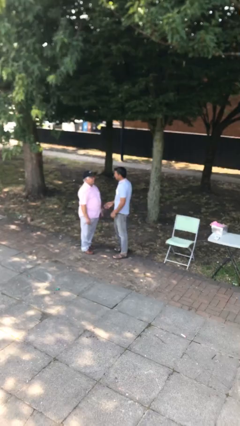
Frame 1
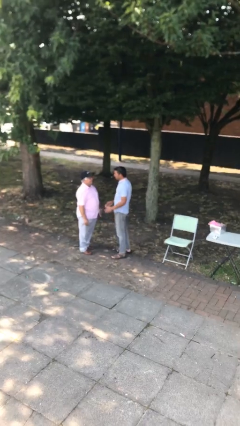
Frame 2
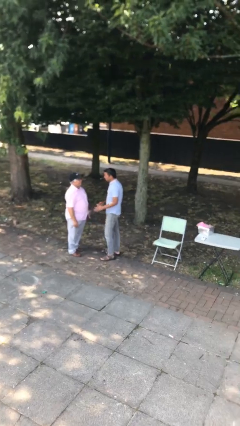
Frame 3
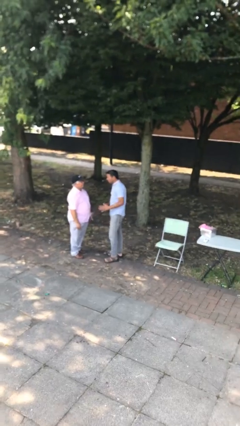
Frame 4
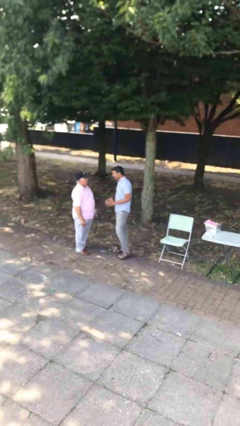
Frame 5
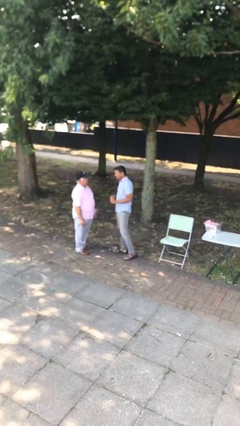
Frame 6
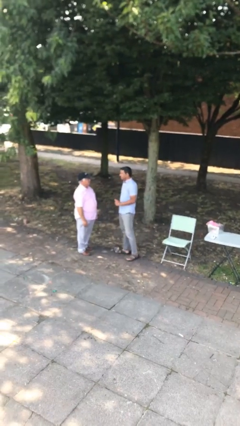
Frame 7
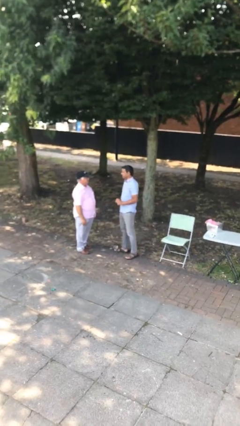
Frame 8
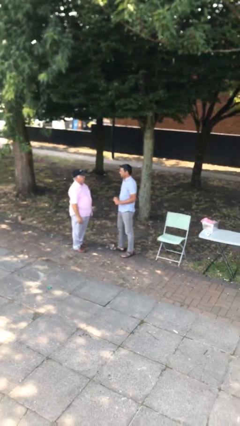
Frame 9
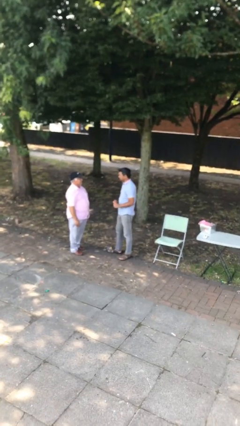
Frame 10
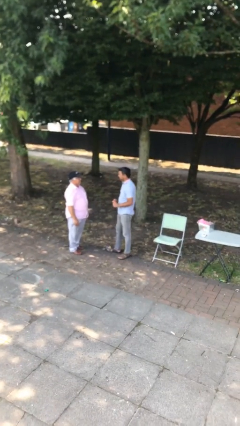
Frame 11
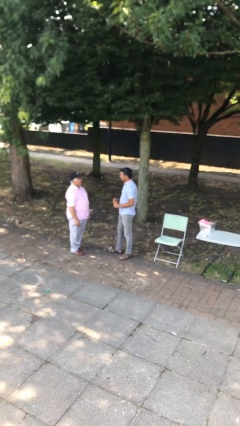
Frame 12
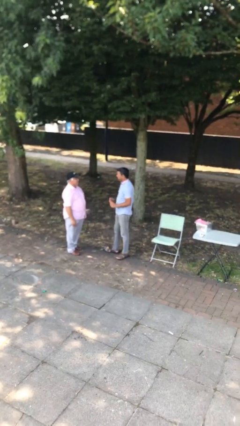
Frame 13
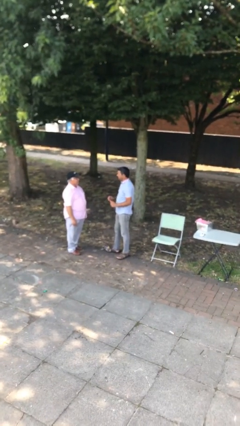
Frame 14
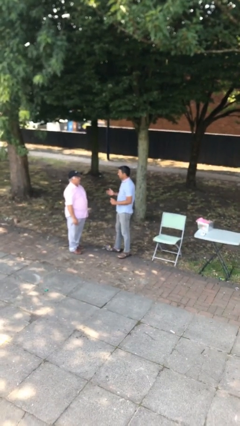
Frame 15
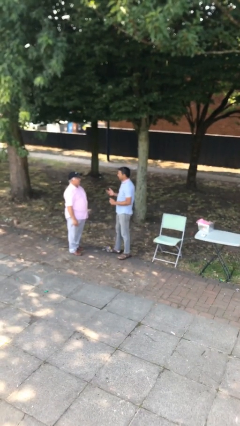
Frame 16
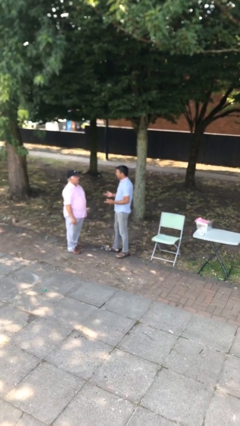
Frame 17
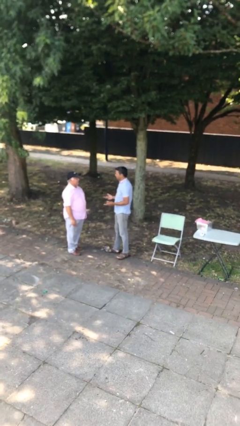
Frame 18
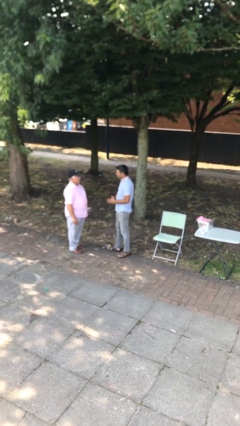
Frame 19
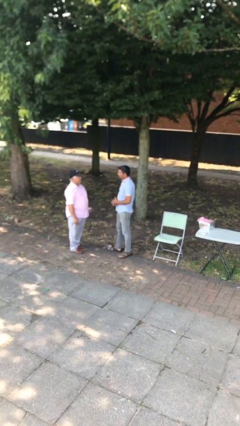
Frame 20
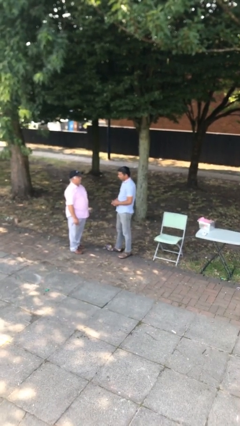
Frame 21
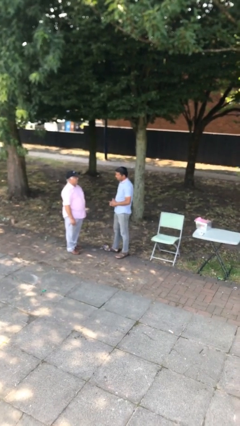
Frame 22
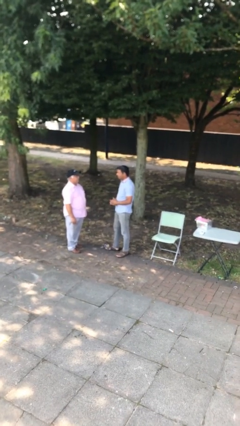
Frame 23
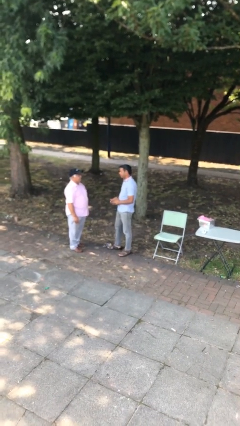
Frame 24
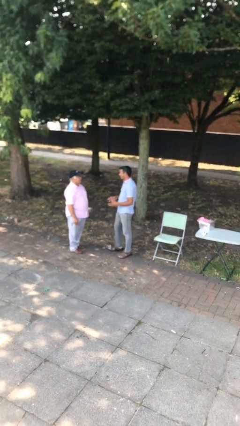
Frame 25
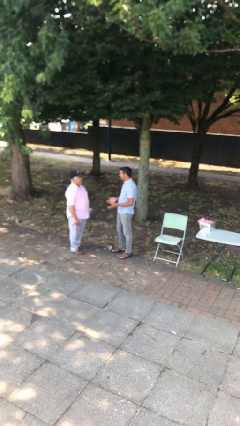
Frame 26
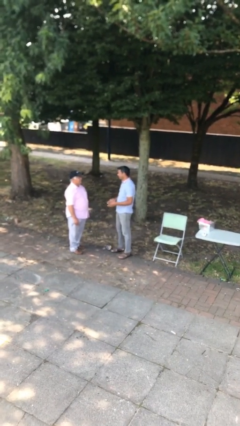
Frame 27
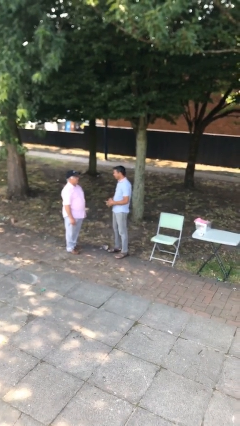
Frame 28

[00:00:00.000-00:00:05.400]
person talks to person

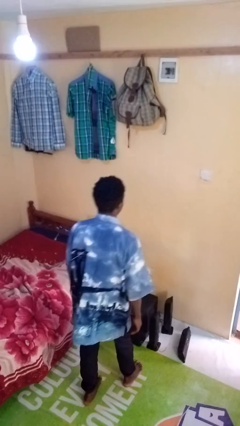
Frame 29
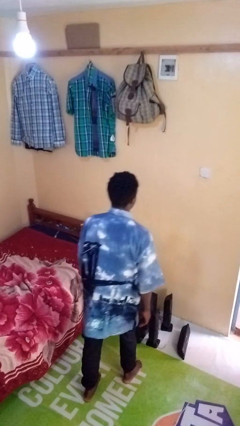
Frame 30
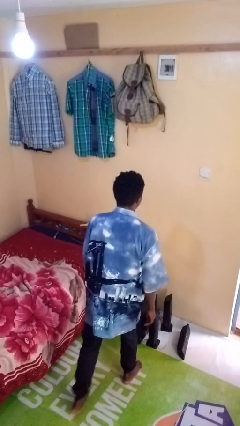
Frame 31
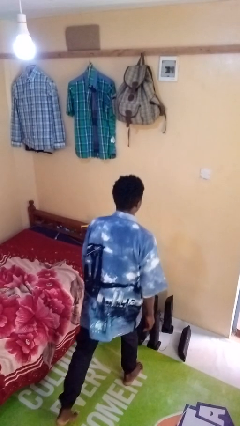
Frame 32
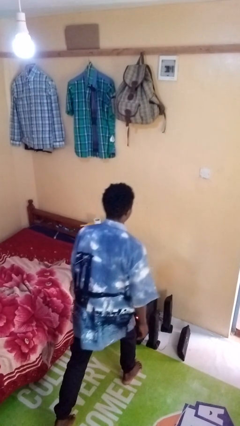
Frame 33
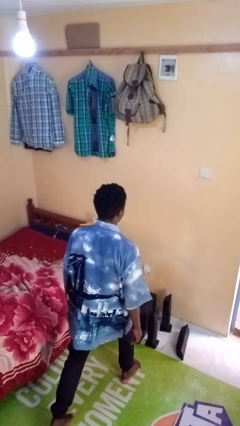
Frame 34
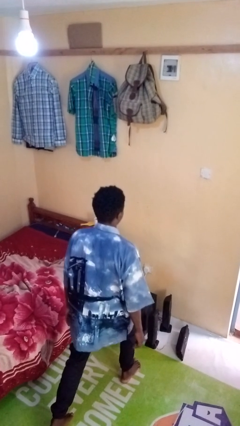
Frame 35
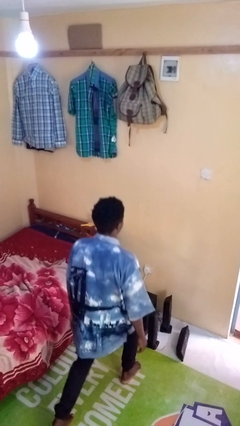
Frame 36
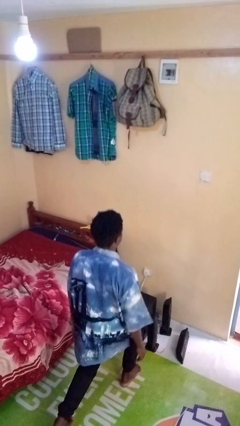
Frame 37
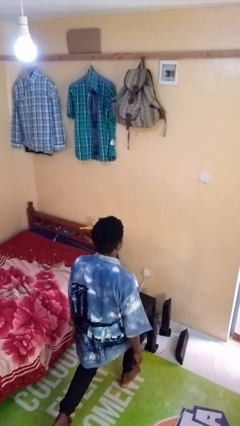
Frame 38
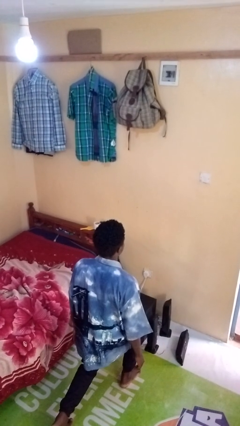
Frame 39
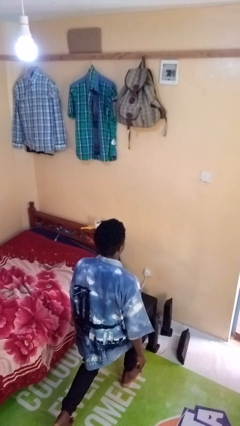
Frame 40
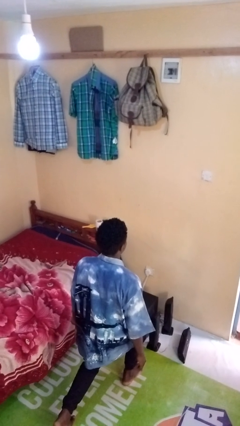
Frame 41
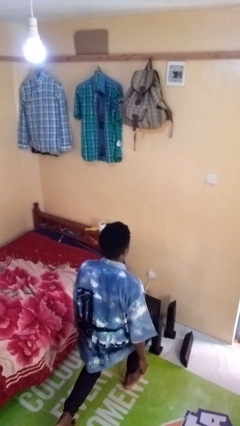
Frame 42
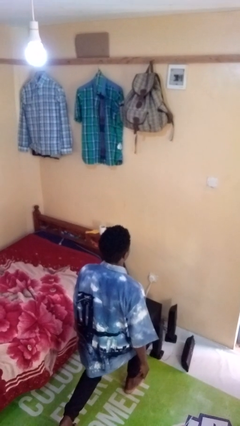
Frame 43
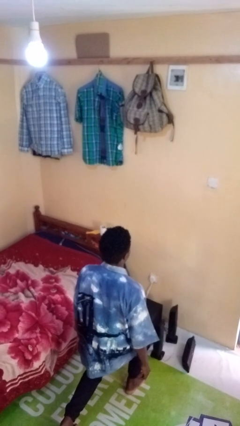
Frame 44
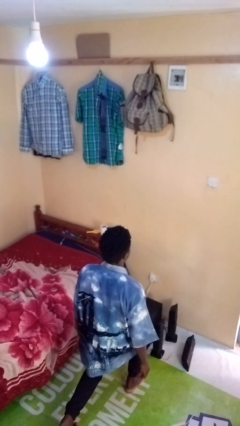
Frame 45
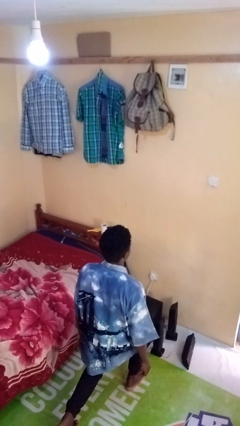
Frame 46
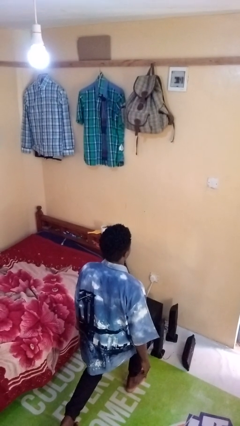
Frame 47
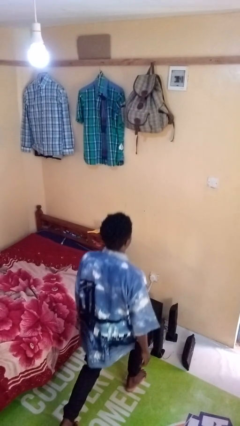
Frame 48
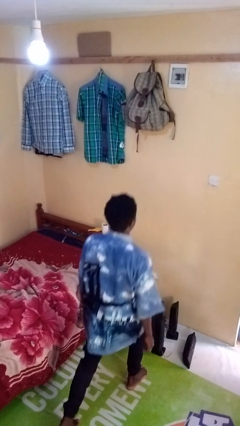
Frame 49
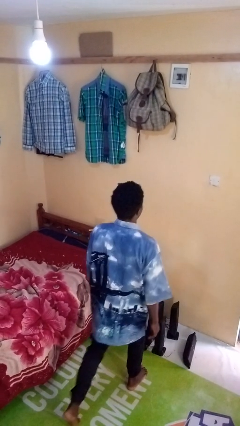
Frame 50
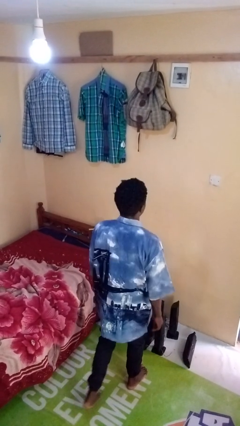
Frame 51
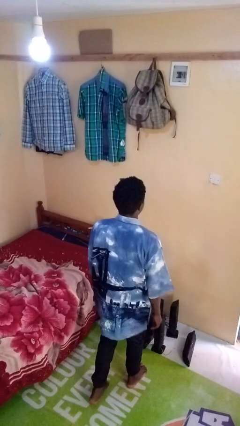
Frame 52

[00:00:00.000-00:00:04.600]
person exercises with lunges

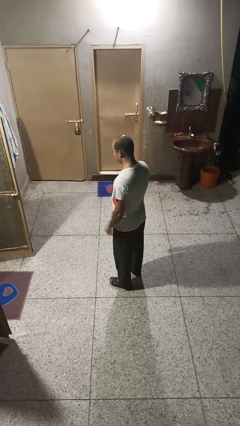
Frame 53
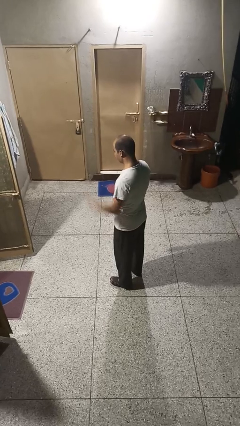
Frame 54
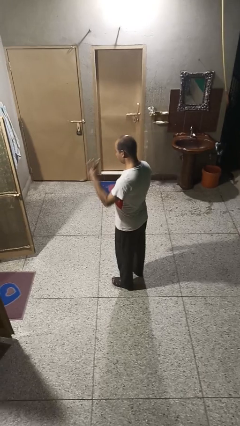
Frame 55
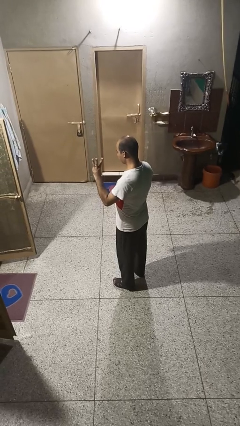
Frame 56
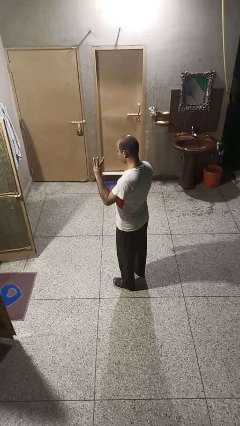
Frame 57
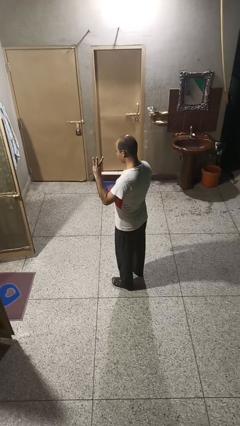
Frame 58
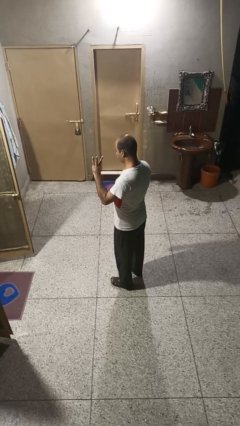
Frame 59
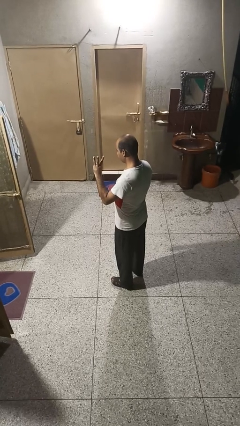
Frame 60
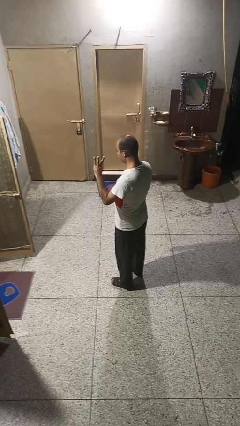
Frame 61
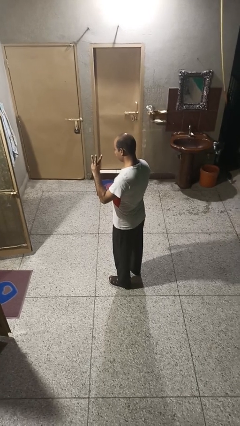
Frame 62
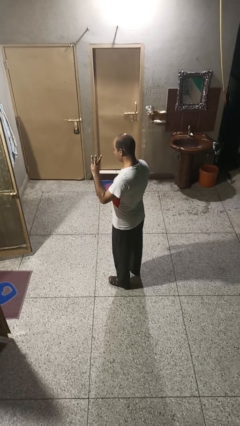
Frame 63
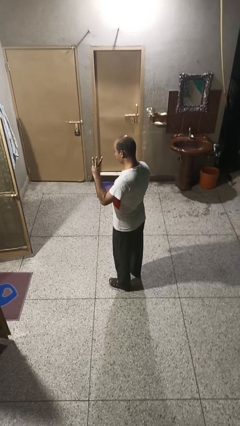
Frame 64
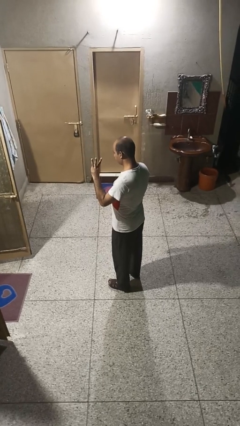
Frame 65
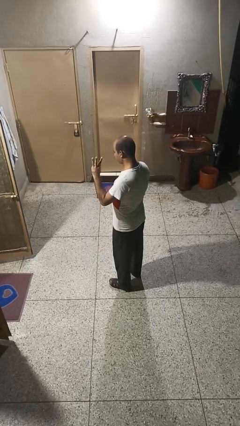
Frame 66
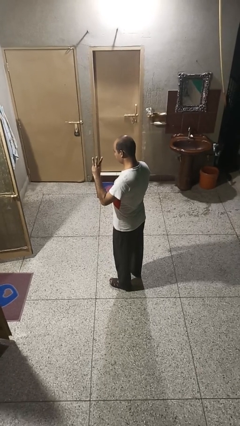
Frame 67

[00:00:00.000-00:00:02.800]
person gestures number three

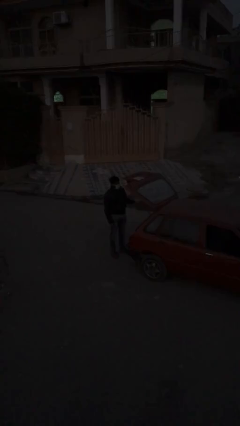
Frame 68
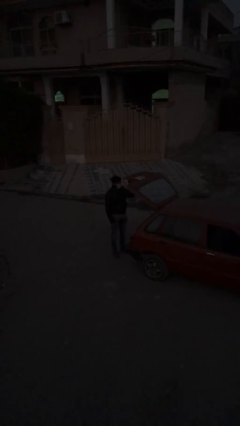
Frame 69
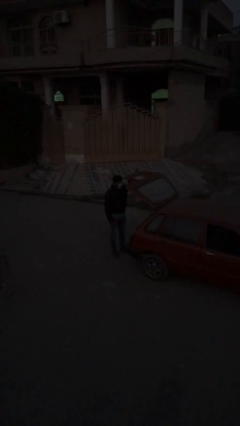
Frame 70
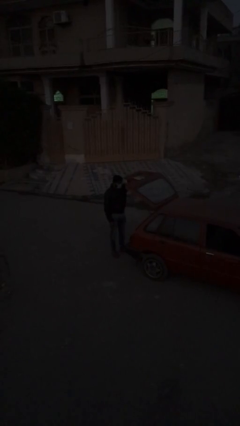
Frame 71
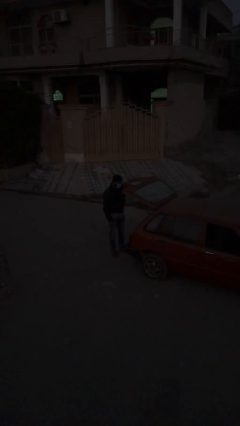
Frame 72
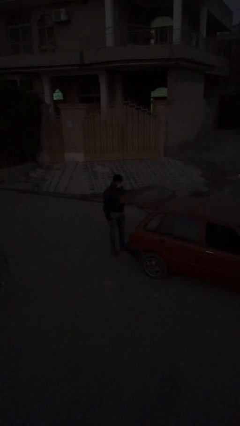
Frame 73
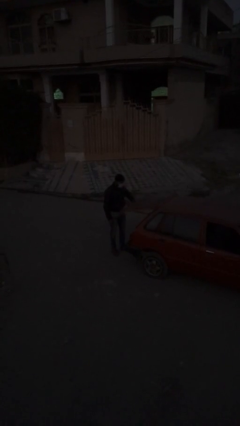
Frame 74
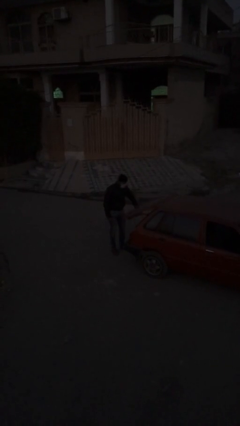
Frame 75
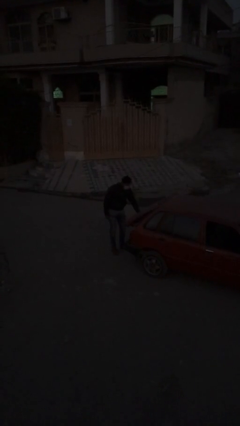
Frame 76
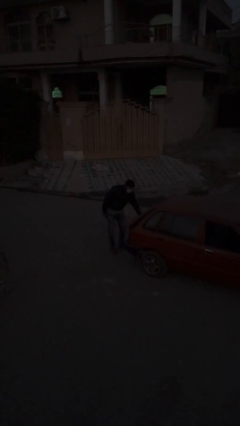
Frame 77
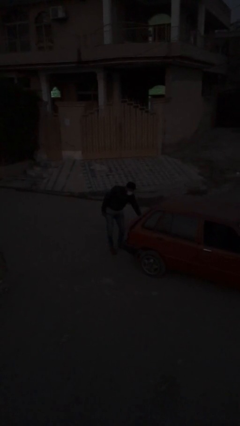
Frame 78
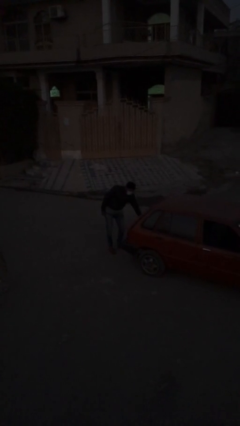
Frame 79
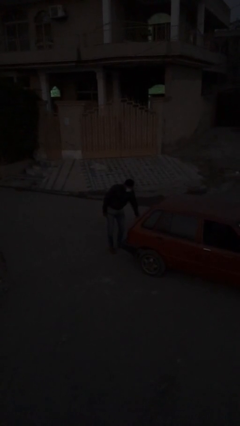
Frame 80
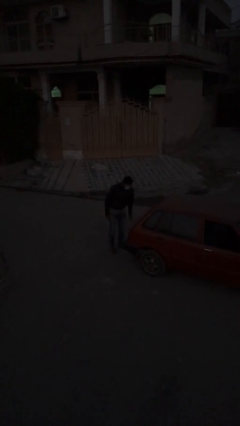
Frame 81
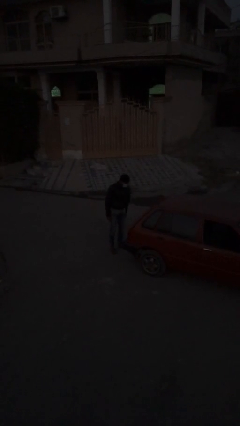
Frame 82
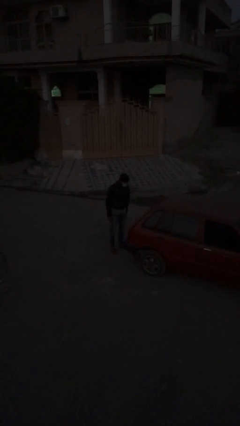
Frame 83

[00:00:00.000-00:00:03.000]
person closes car trunk

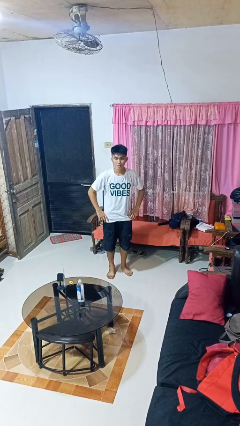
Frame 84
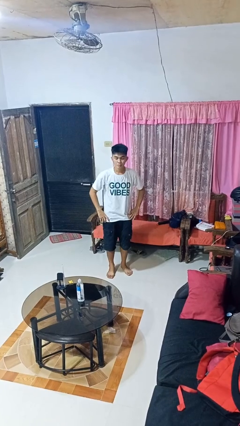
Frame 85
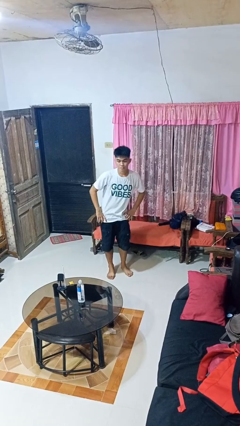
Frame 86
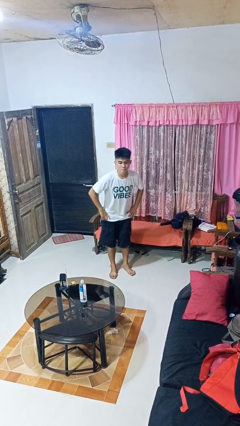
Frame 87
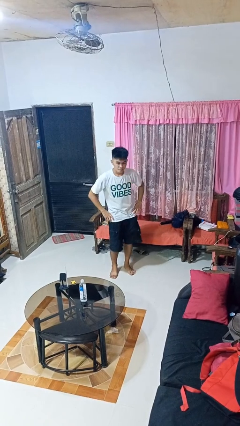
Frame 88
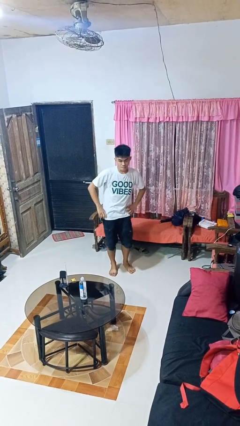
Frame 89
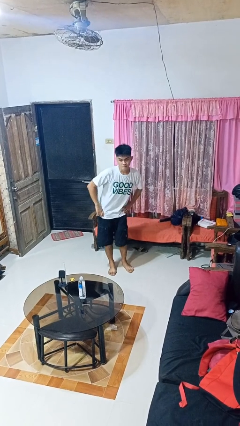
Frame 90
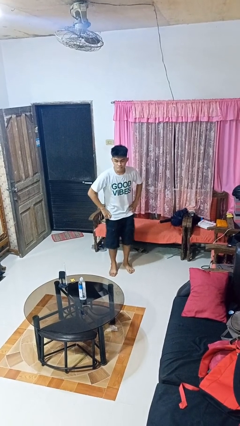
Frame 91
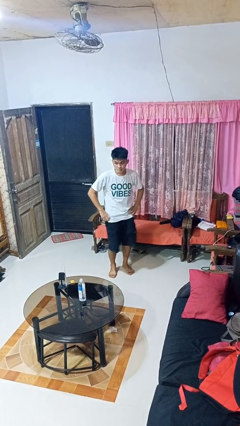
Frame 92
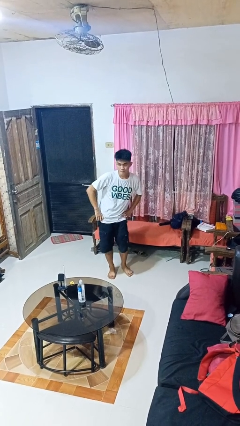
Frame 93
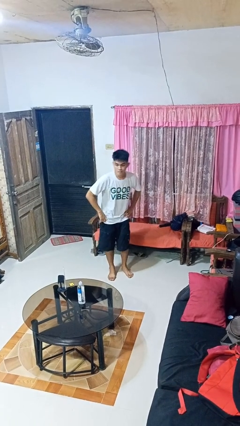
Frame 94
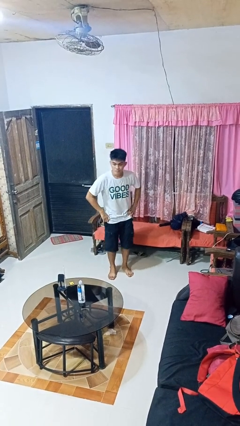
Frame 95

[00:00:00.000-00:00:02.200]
person wiggles hips
